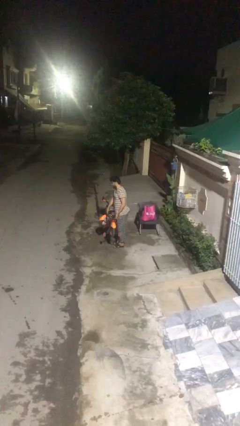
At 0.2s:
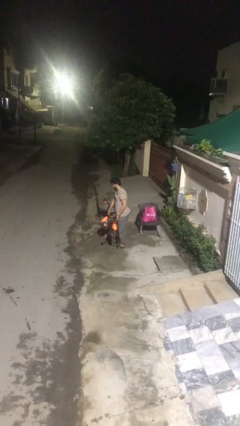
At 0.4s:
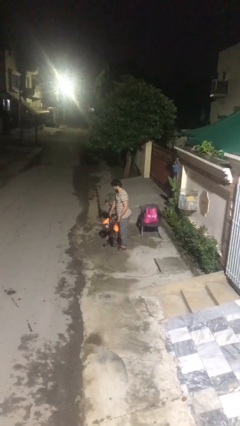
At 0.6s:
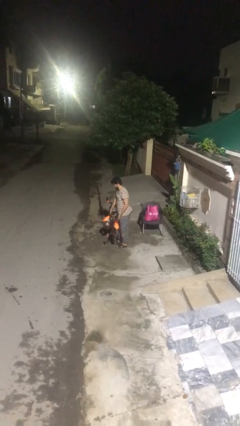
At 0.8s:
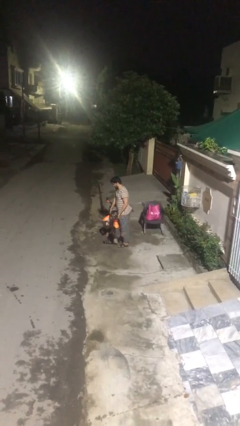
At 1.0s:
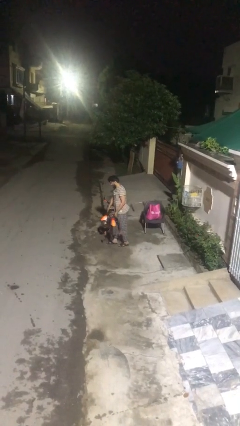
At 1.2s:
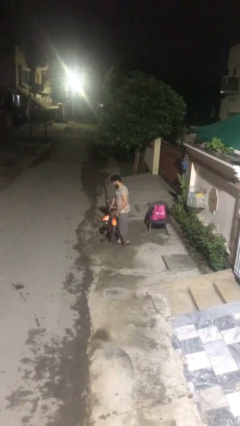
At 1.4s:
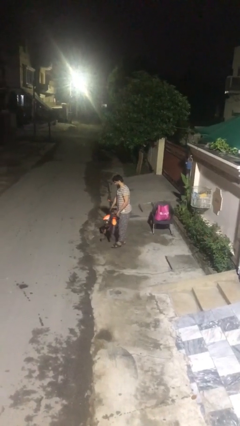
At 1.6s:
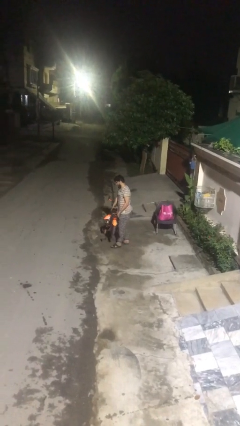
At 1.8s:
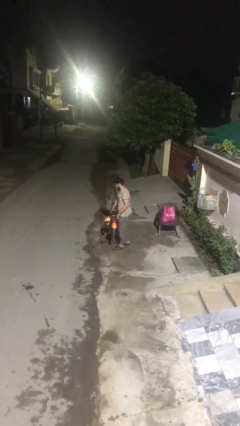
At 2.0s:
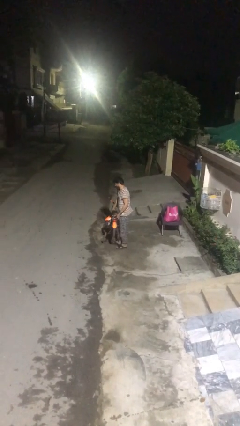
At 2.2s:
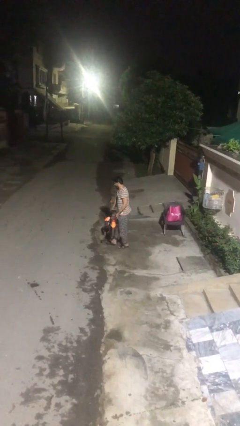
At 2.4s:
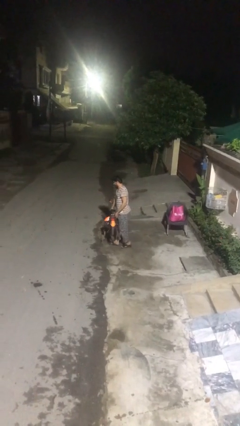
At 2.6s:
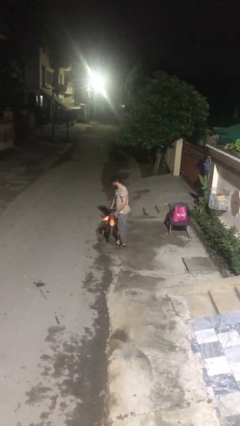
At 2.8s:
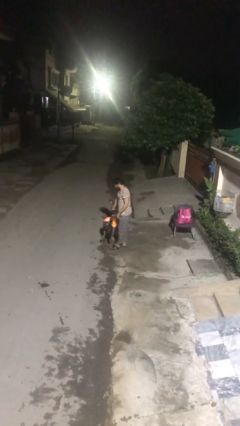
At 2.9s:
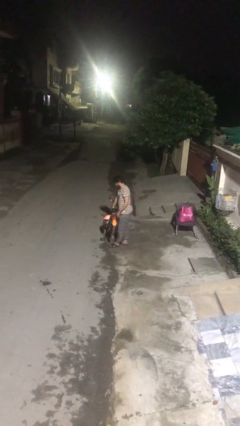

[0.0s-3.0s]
person carries heavy object

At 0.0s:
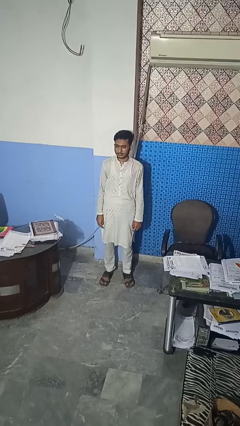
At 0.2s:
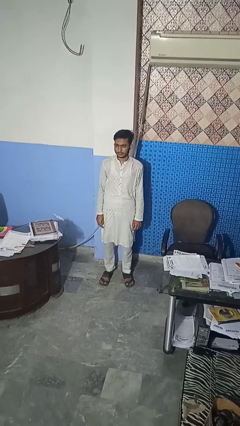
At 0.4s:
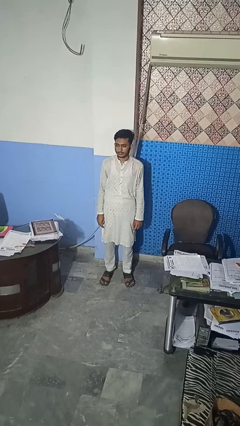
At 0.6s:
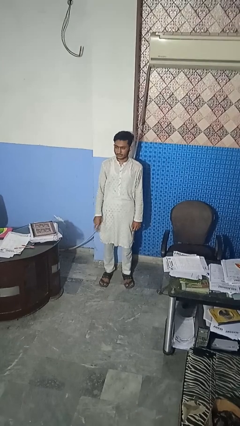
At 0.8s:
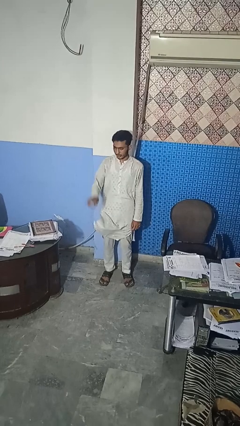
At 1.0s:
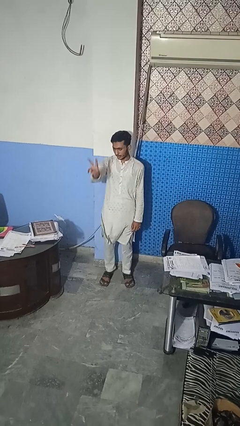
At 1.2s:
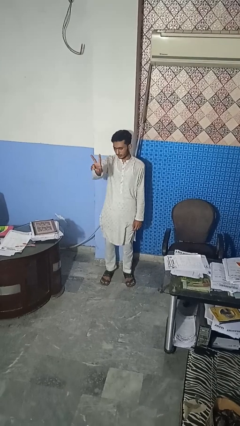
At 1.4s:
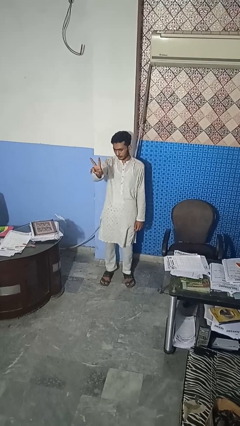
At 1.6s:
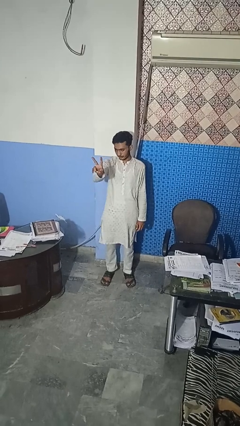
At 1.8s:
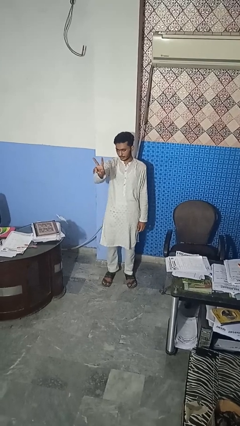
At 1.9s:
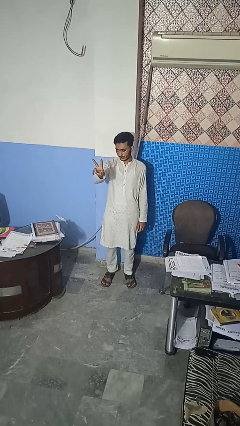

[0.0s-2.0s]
person gestures peace

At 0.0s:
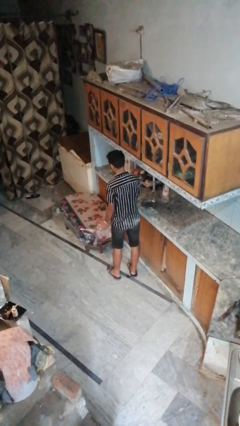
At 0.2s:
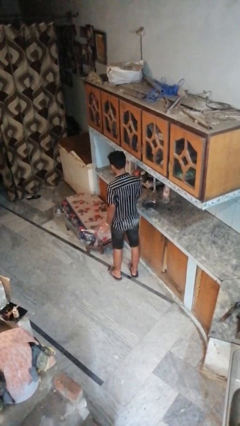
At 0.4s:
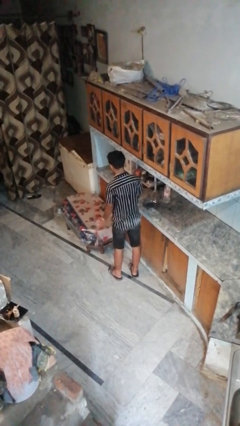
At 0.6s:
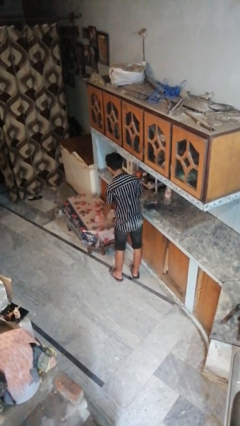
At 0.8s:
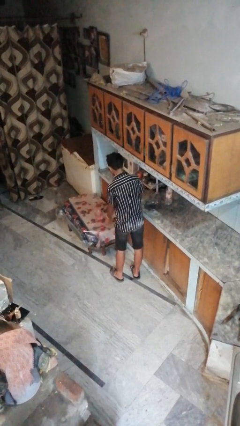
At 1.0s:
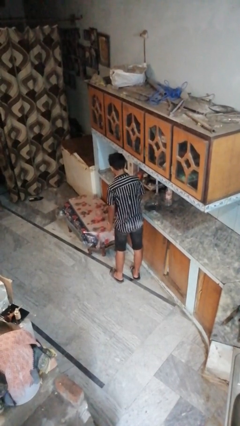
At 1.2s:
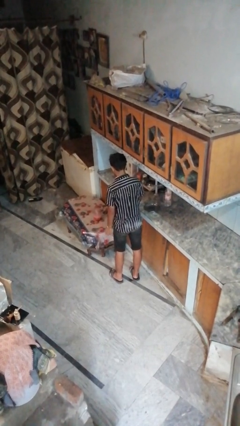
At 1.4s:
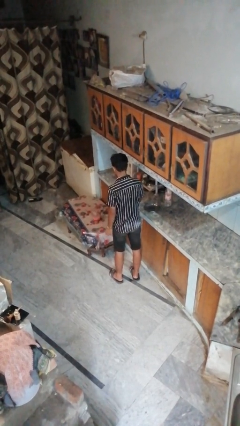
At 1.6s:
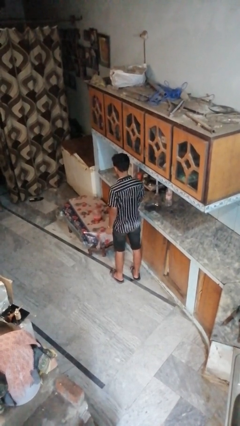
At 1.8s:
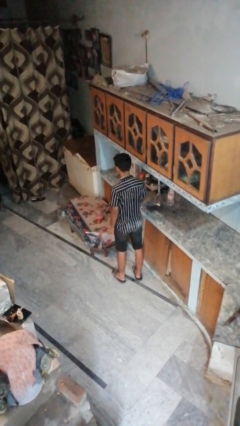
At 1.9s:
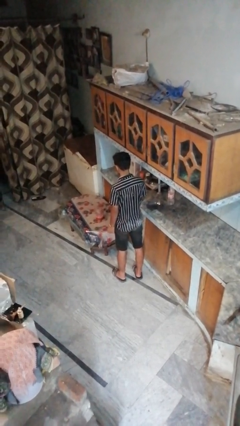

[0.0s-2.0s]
person throws object on table

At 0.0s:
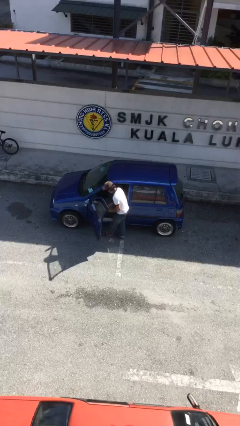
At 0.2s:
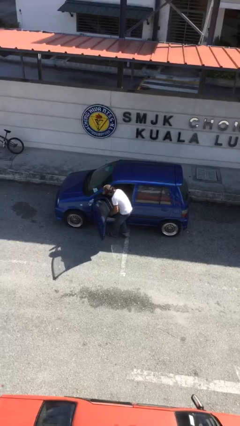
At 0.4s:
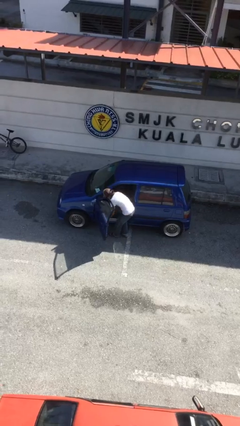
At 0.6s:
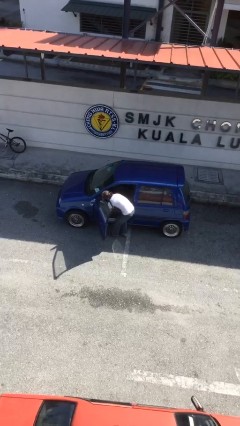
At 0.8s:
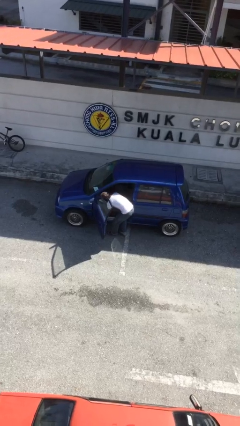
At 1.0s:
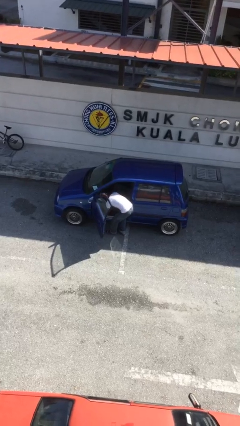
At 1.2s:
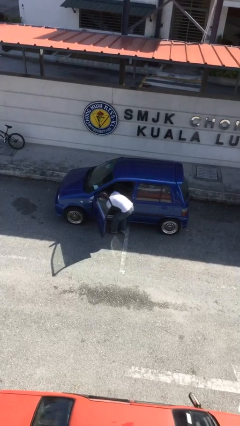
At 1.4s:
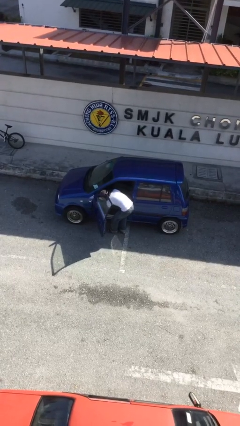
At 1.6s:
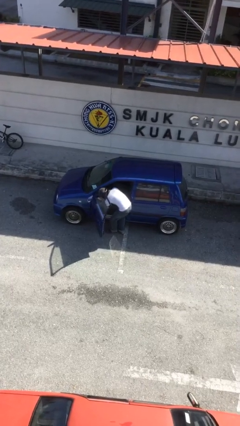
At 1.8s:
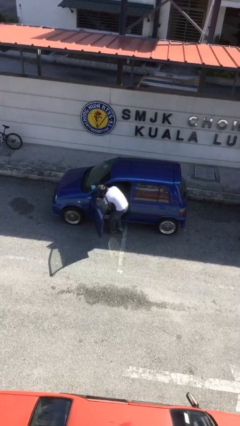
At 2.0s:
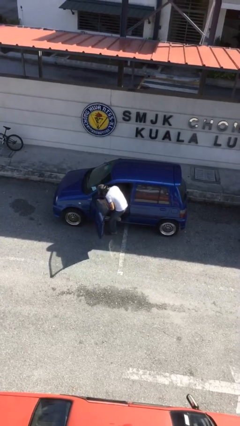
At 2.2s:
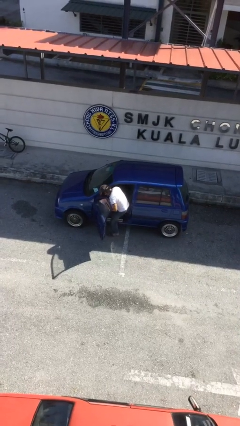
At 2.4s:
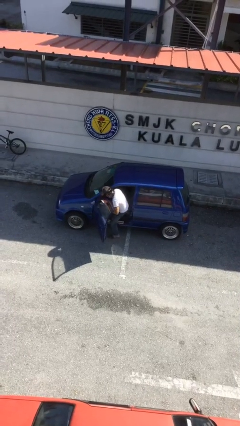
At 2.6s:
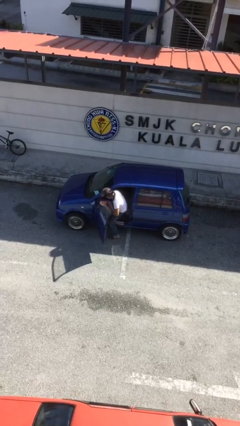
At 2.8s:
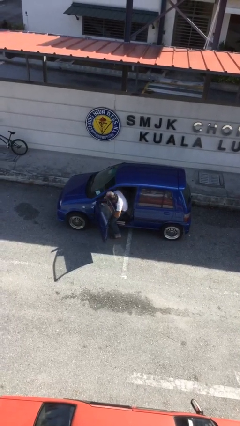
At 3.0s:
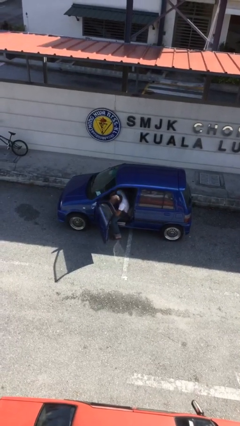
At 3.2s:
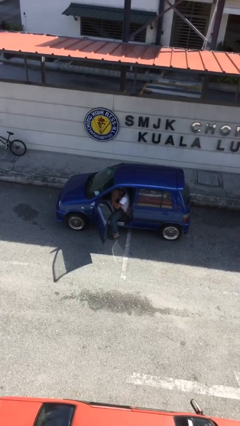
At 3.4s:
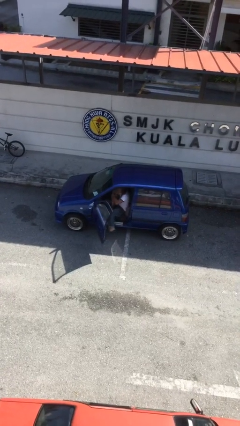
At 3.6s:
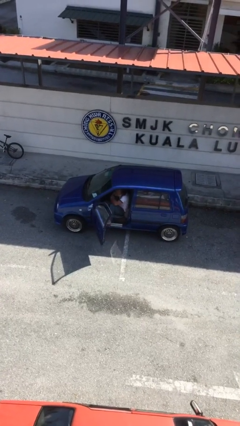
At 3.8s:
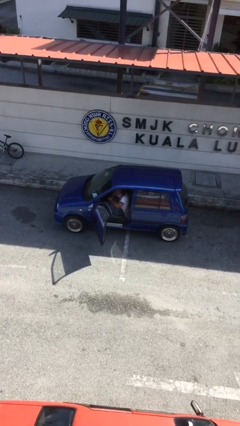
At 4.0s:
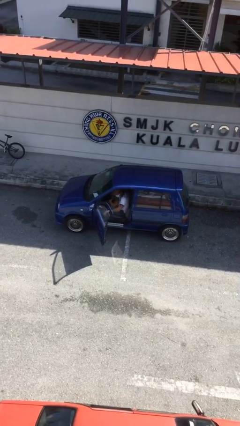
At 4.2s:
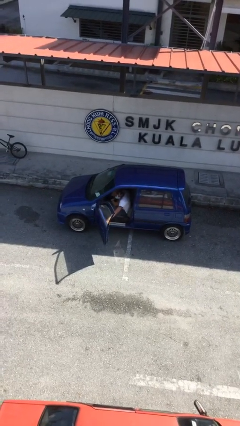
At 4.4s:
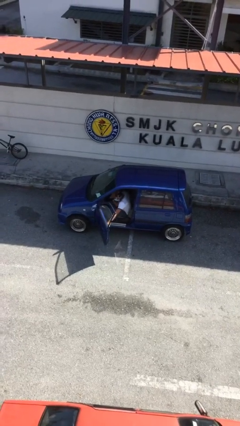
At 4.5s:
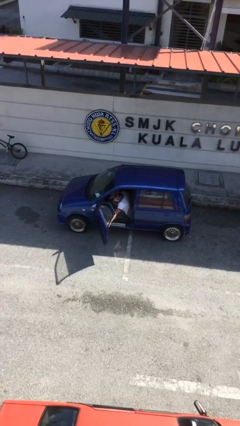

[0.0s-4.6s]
person enters car

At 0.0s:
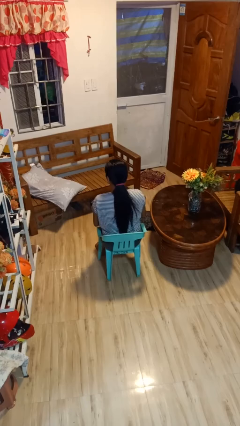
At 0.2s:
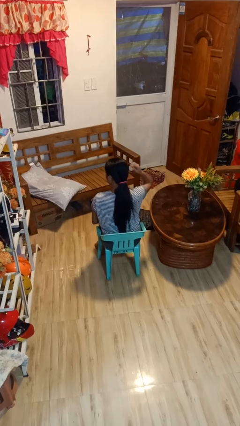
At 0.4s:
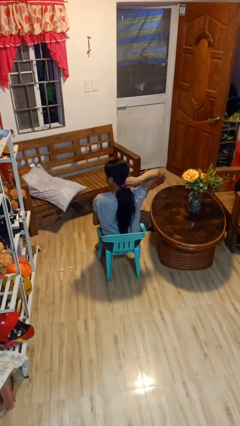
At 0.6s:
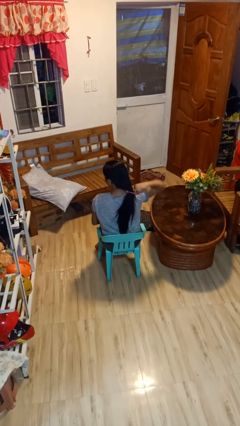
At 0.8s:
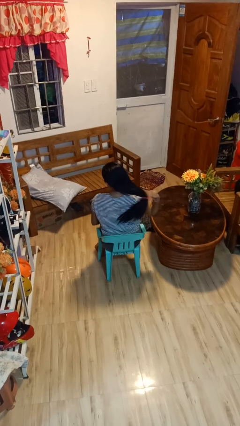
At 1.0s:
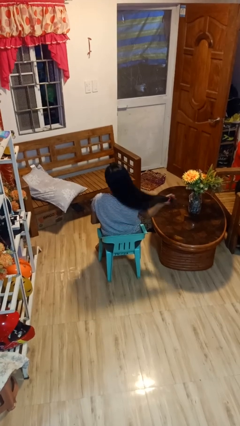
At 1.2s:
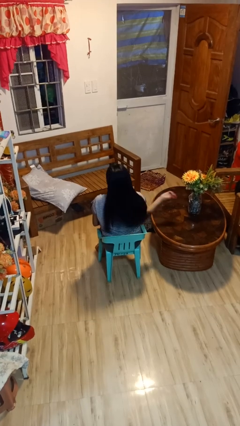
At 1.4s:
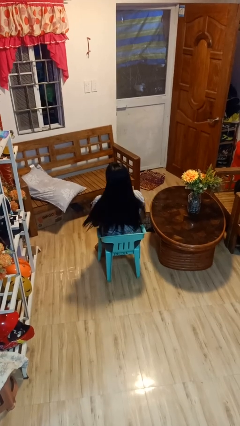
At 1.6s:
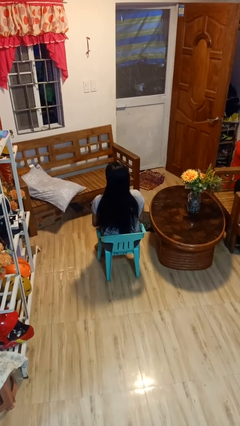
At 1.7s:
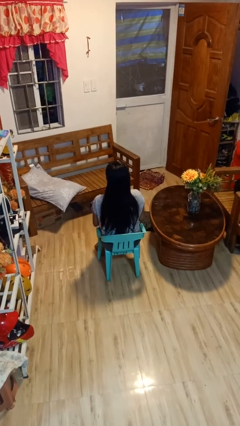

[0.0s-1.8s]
person takes off hairtie

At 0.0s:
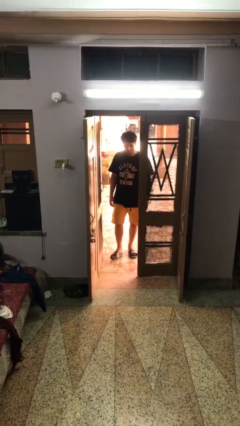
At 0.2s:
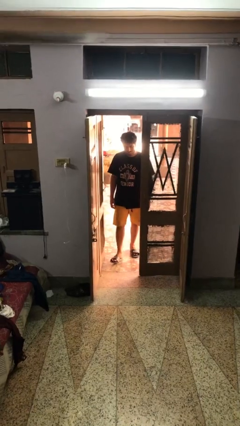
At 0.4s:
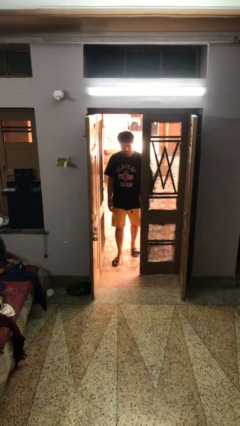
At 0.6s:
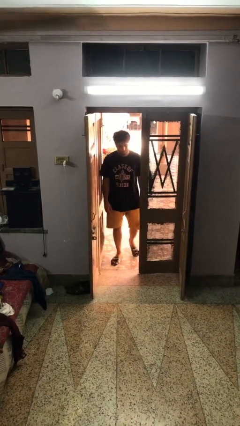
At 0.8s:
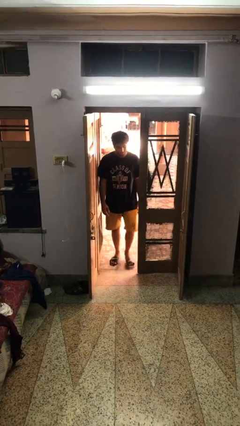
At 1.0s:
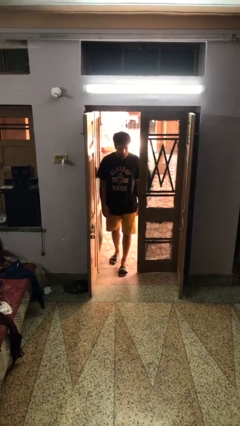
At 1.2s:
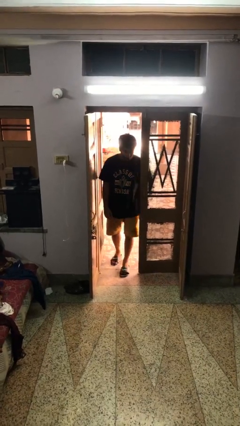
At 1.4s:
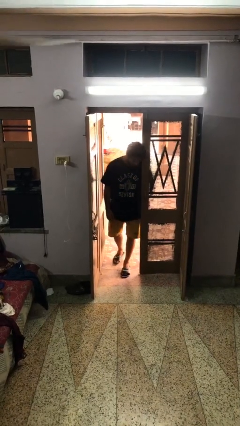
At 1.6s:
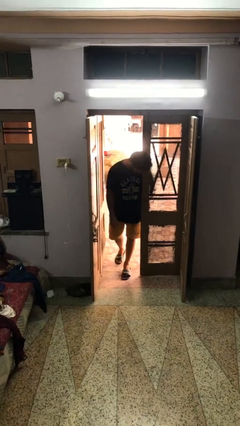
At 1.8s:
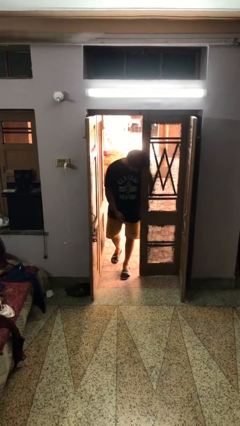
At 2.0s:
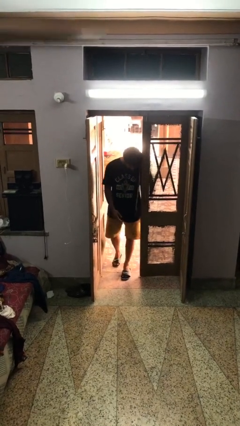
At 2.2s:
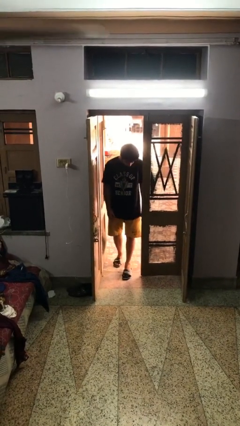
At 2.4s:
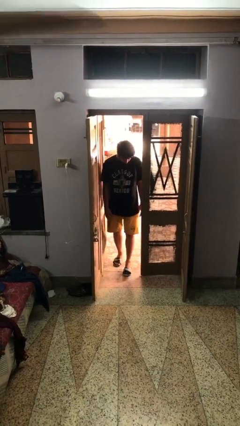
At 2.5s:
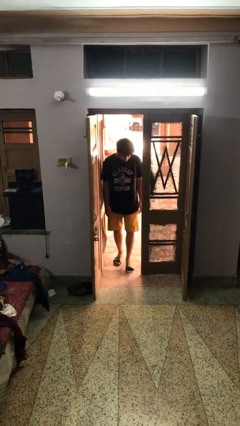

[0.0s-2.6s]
person bumps into wall

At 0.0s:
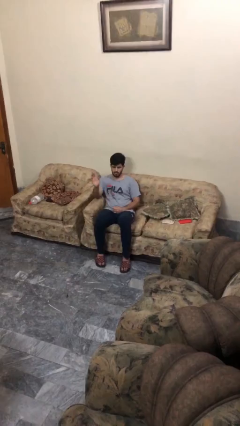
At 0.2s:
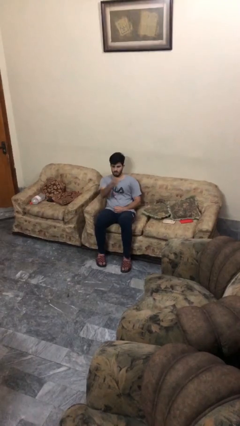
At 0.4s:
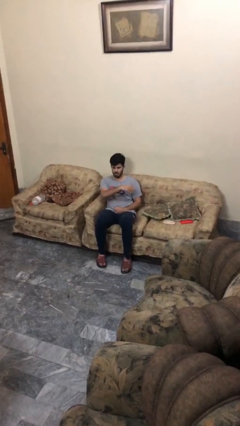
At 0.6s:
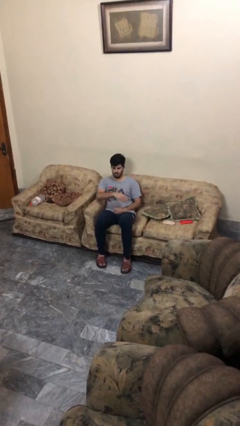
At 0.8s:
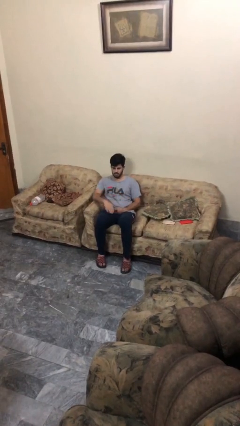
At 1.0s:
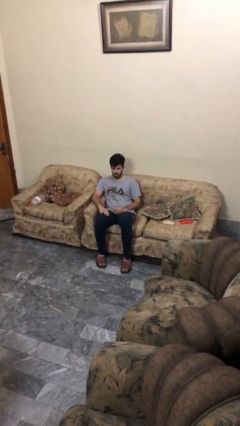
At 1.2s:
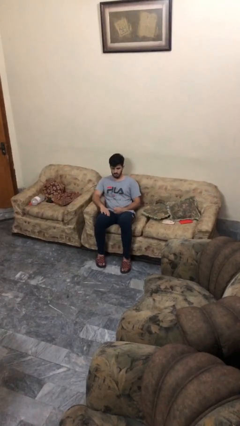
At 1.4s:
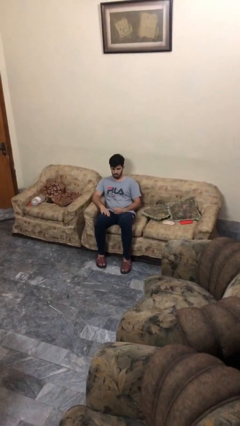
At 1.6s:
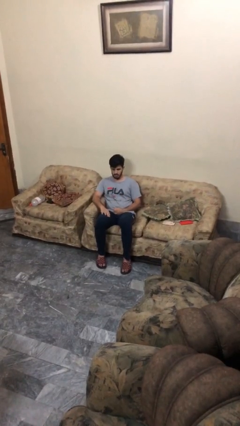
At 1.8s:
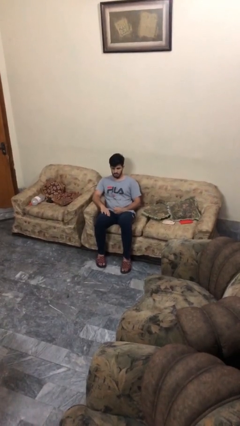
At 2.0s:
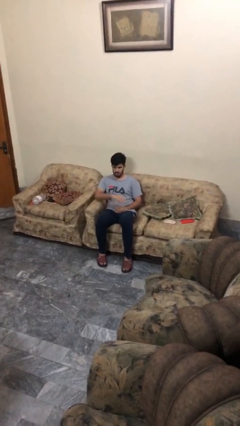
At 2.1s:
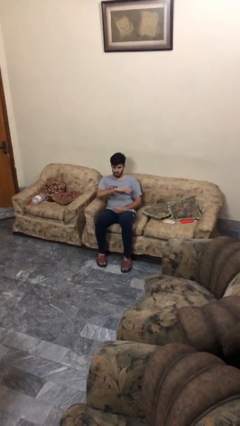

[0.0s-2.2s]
person gestures swipe left
